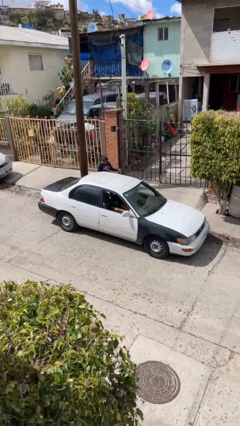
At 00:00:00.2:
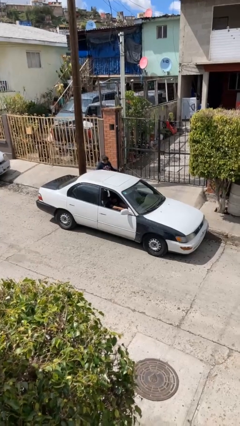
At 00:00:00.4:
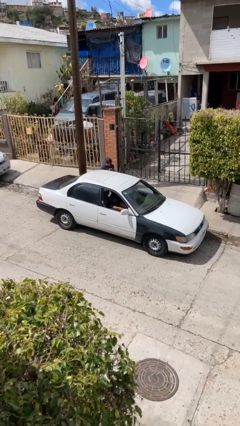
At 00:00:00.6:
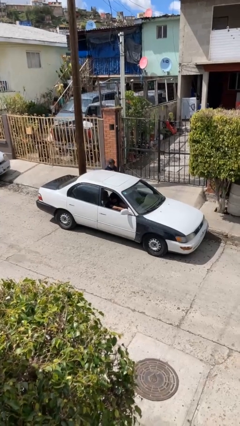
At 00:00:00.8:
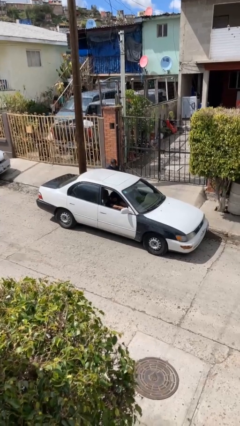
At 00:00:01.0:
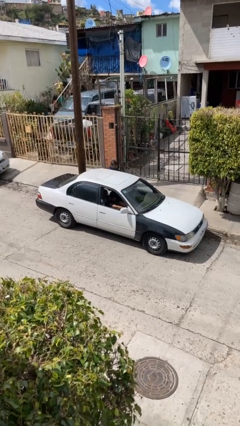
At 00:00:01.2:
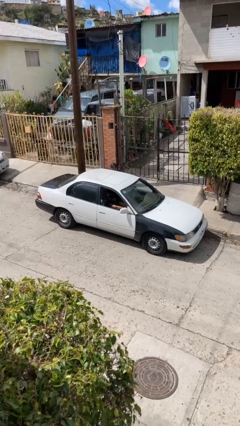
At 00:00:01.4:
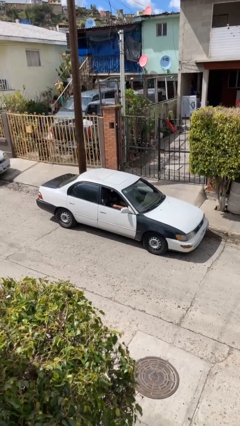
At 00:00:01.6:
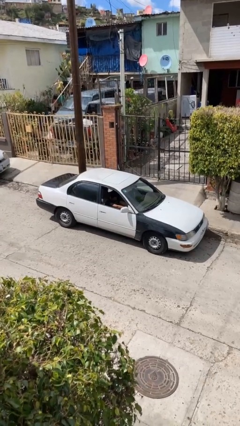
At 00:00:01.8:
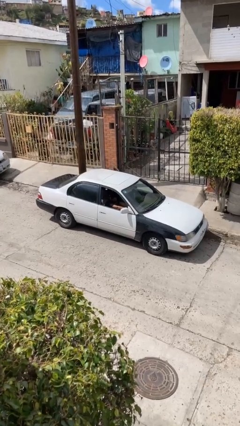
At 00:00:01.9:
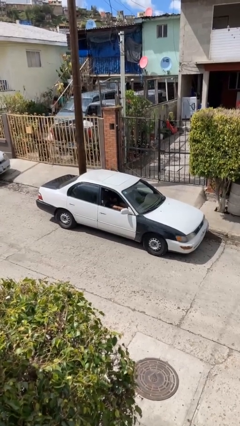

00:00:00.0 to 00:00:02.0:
car picks up person

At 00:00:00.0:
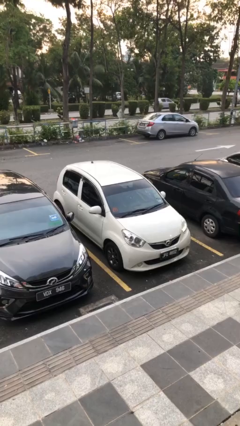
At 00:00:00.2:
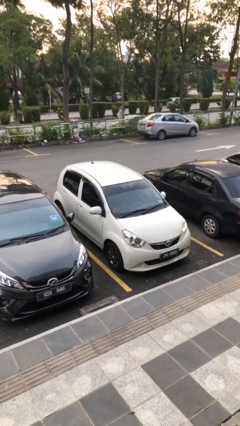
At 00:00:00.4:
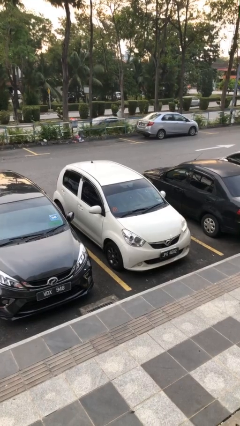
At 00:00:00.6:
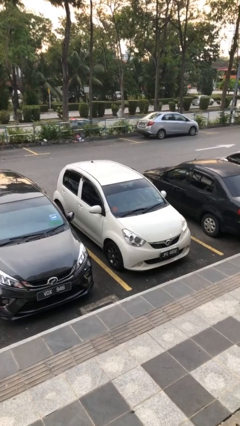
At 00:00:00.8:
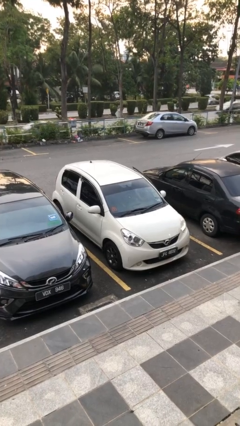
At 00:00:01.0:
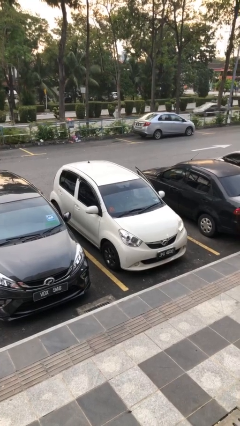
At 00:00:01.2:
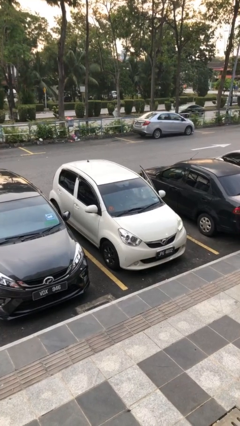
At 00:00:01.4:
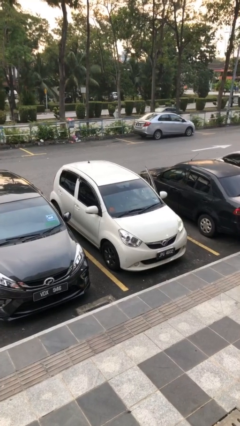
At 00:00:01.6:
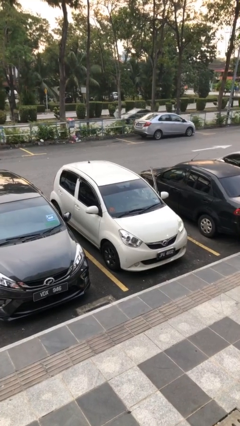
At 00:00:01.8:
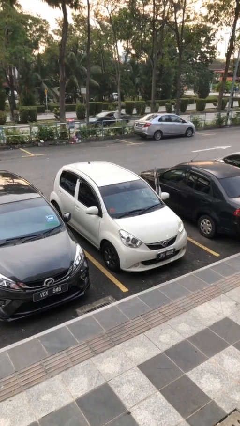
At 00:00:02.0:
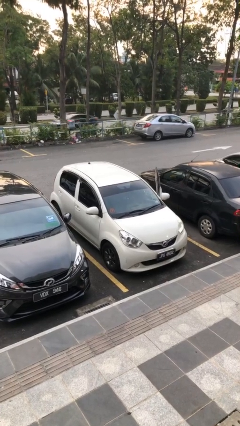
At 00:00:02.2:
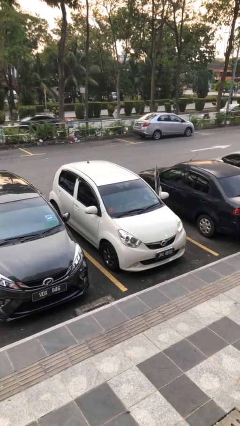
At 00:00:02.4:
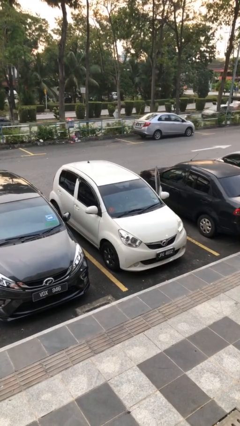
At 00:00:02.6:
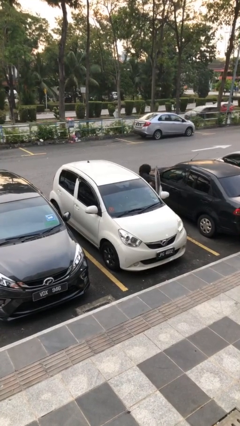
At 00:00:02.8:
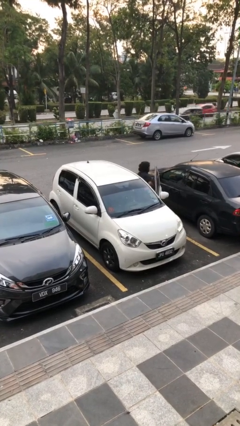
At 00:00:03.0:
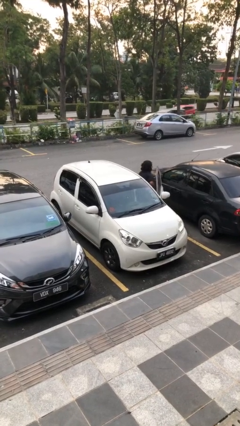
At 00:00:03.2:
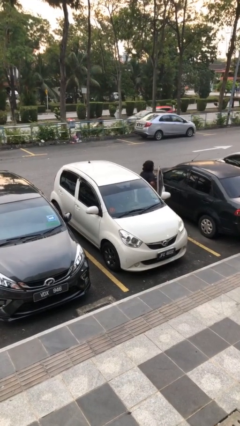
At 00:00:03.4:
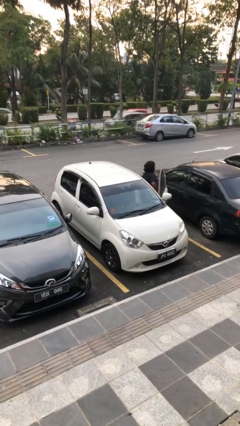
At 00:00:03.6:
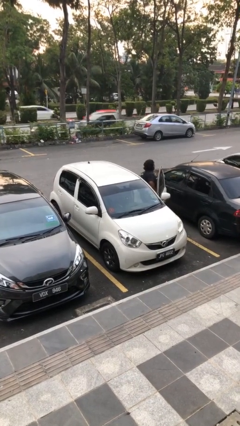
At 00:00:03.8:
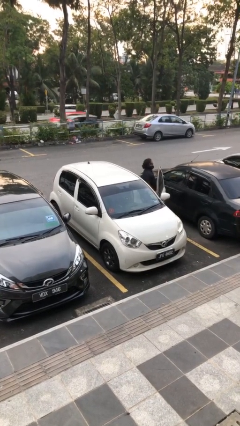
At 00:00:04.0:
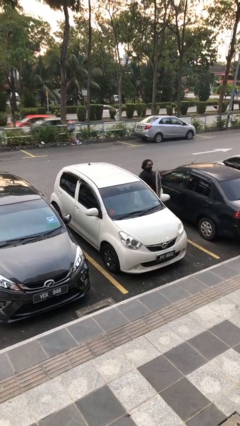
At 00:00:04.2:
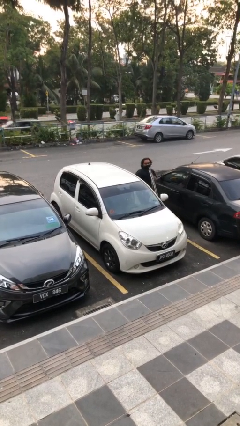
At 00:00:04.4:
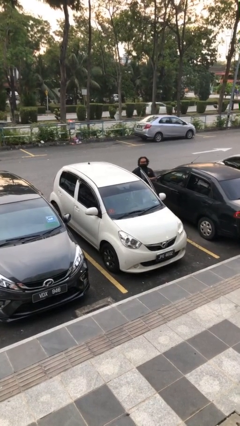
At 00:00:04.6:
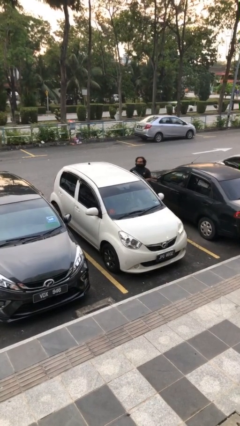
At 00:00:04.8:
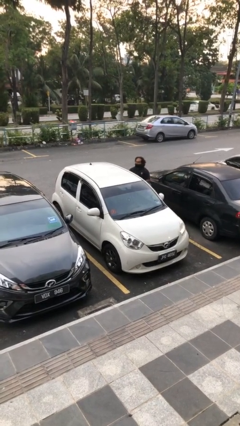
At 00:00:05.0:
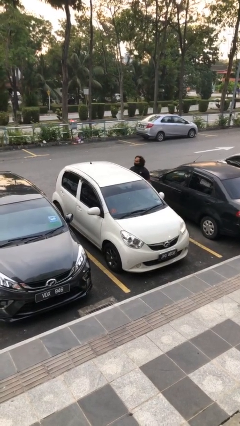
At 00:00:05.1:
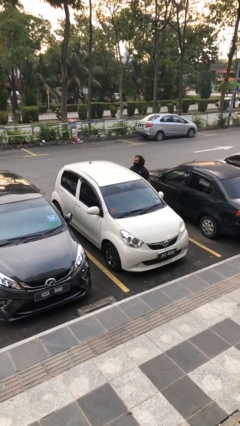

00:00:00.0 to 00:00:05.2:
car drops off person

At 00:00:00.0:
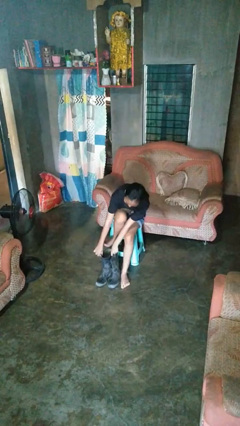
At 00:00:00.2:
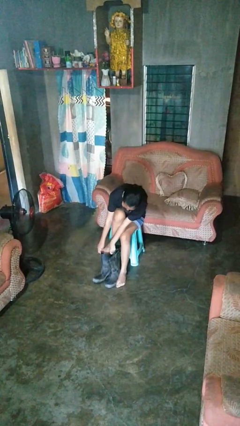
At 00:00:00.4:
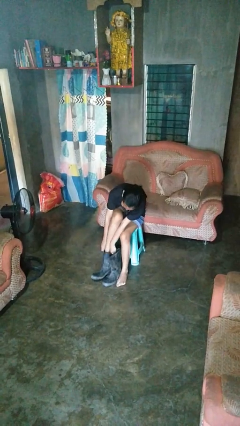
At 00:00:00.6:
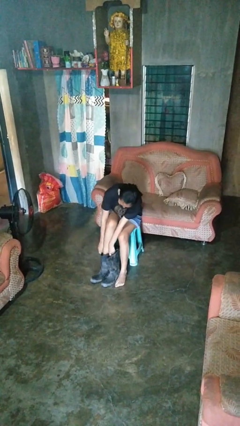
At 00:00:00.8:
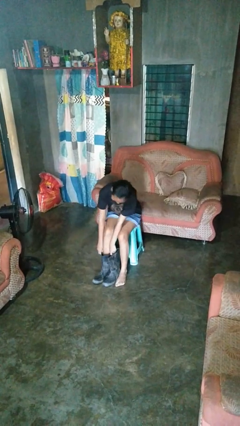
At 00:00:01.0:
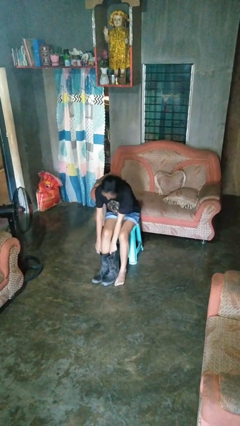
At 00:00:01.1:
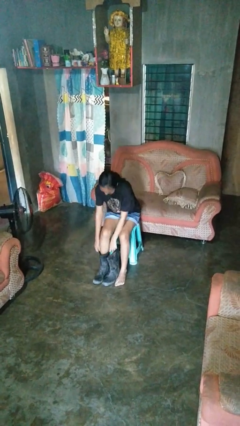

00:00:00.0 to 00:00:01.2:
person puts on boots

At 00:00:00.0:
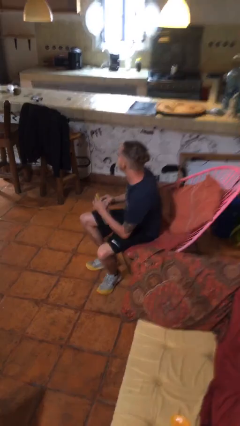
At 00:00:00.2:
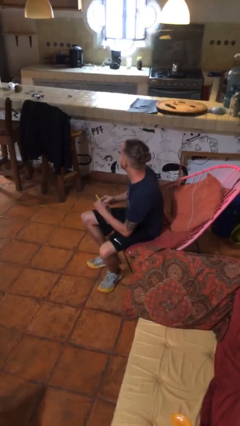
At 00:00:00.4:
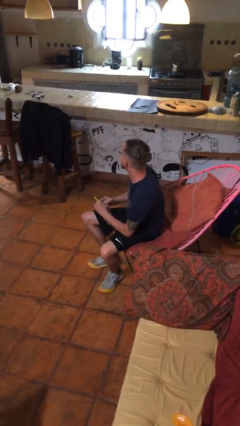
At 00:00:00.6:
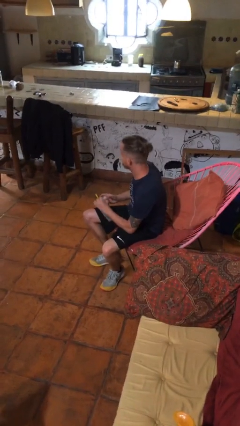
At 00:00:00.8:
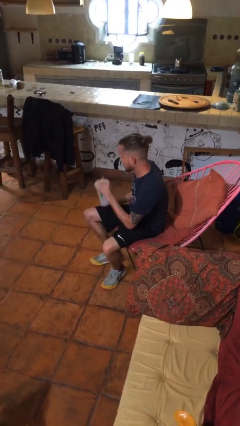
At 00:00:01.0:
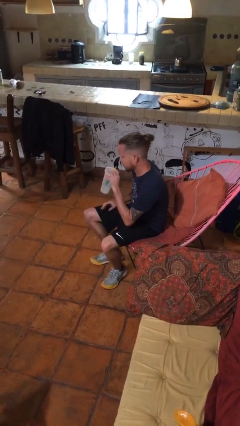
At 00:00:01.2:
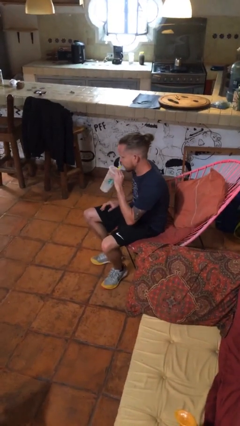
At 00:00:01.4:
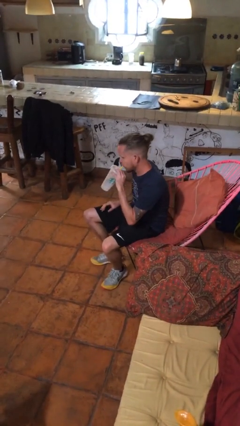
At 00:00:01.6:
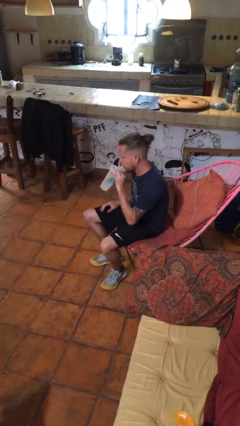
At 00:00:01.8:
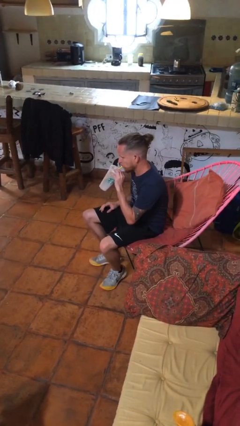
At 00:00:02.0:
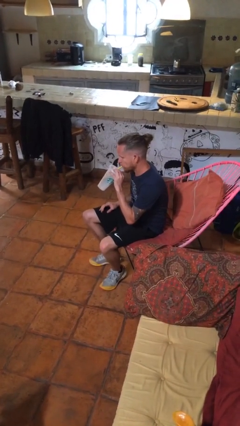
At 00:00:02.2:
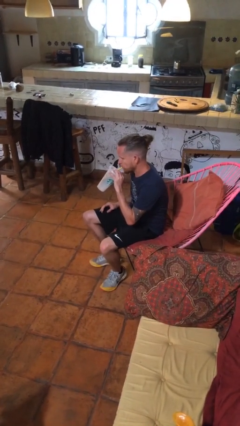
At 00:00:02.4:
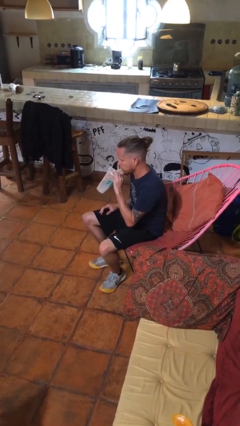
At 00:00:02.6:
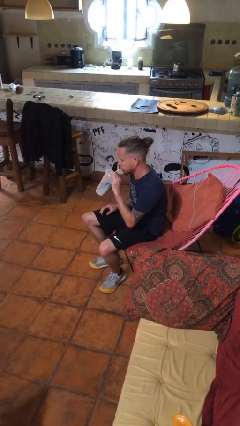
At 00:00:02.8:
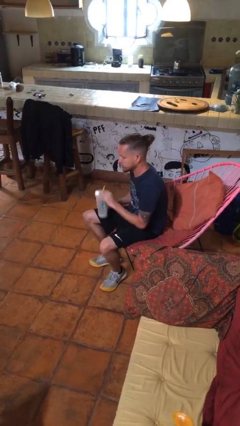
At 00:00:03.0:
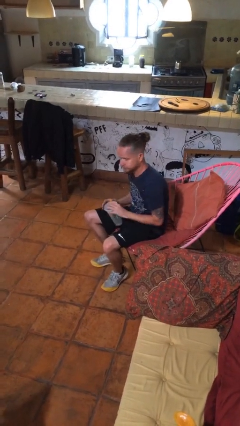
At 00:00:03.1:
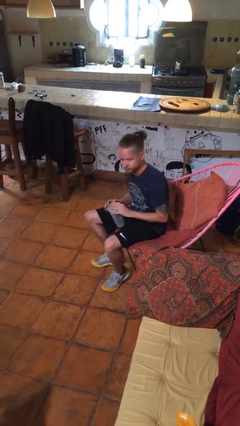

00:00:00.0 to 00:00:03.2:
person drinks from straw

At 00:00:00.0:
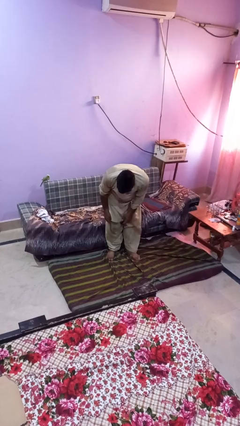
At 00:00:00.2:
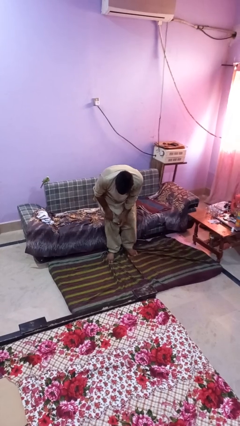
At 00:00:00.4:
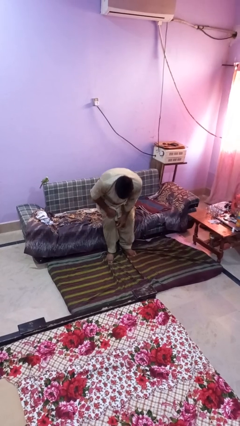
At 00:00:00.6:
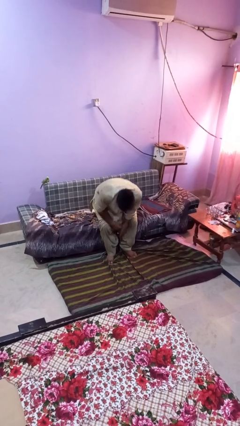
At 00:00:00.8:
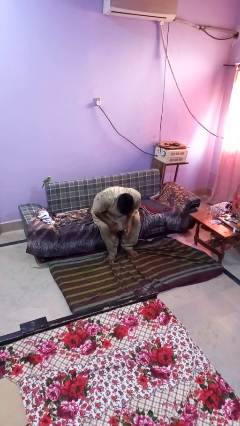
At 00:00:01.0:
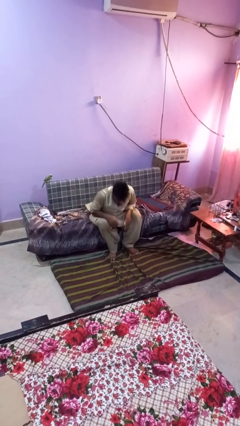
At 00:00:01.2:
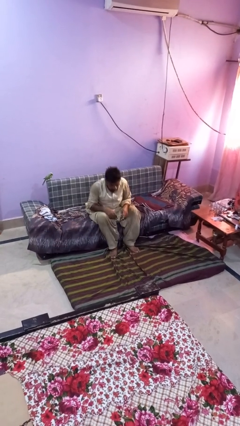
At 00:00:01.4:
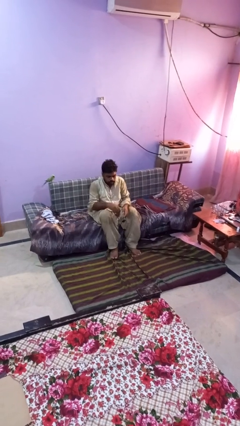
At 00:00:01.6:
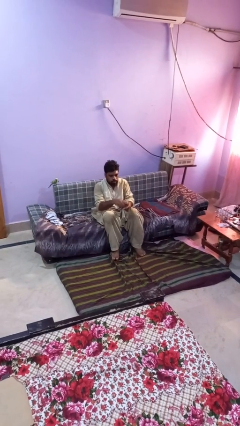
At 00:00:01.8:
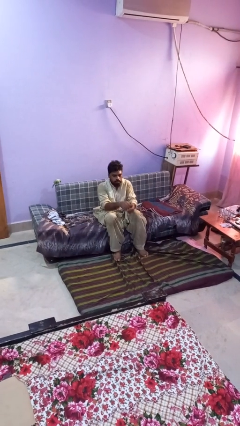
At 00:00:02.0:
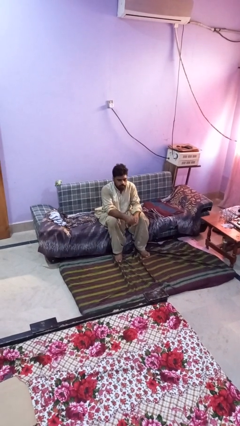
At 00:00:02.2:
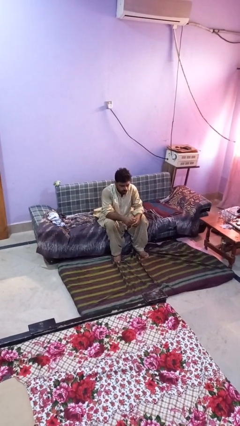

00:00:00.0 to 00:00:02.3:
person sits down

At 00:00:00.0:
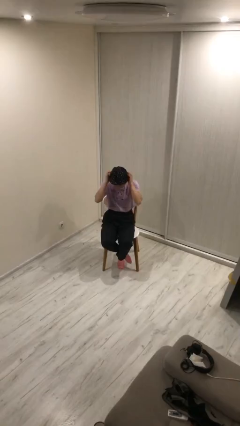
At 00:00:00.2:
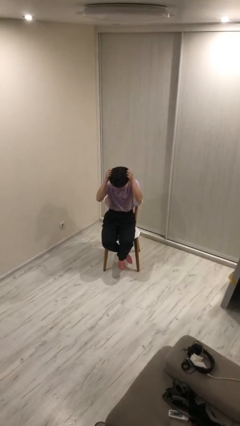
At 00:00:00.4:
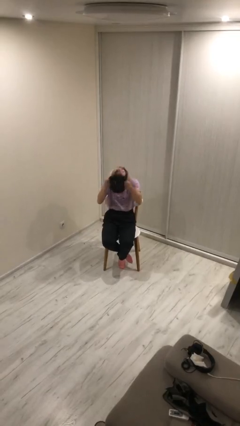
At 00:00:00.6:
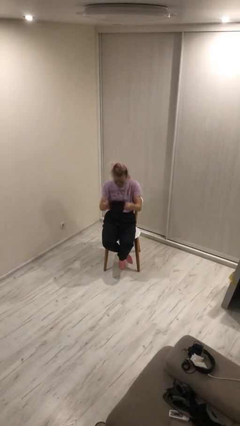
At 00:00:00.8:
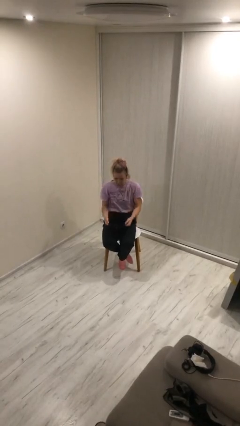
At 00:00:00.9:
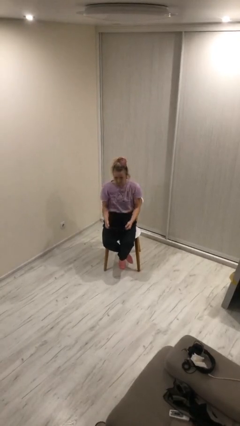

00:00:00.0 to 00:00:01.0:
person takes off hat

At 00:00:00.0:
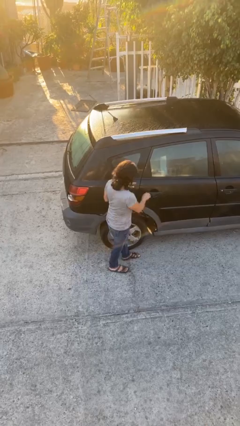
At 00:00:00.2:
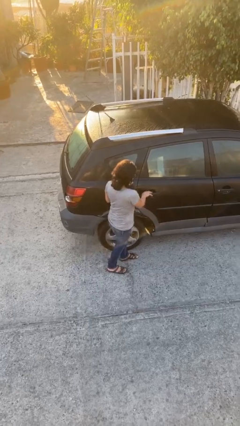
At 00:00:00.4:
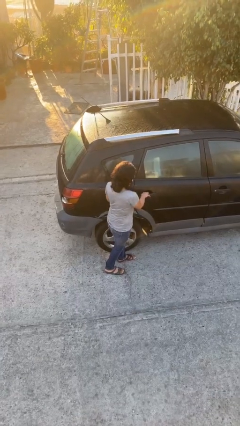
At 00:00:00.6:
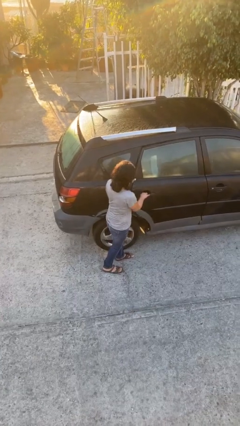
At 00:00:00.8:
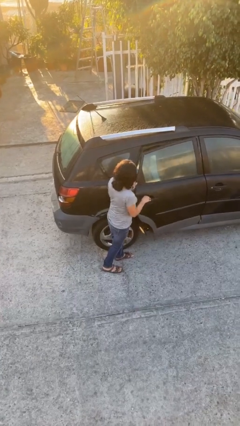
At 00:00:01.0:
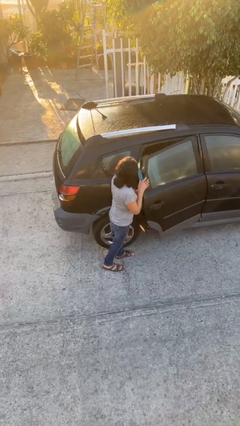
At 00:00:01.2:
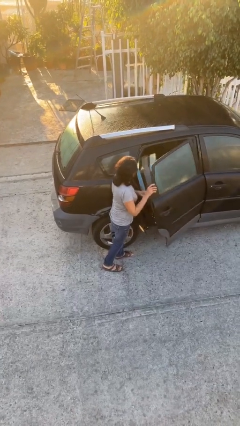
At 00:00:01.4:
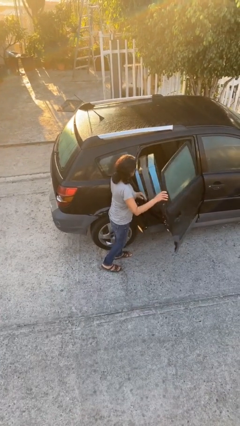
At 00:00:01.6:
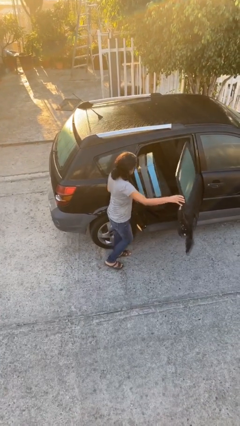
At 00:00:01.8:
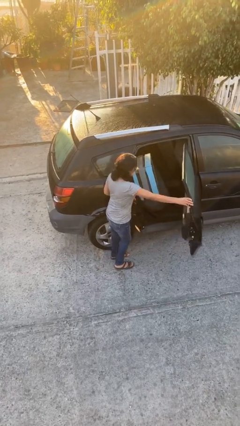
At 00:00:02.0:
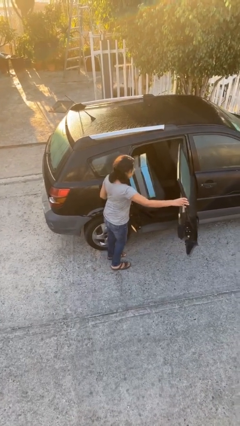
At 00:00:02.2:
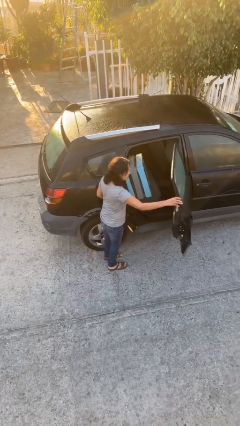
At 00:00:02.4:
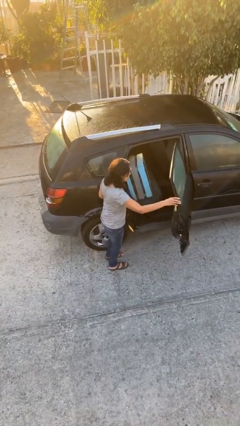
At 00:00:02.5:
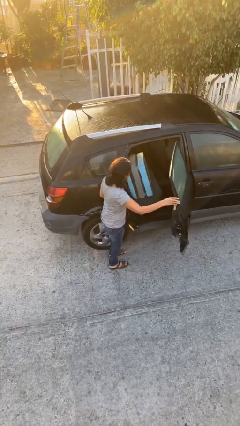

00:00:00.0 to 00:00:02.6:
person opens car door
